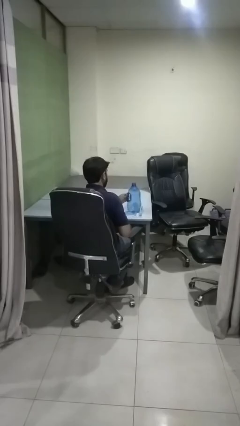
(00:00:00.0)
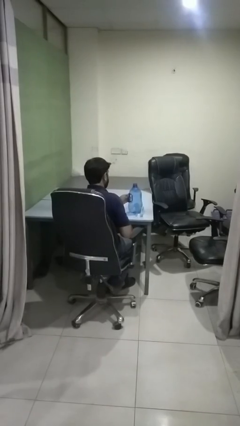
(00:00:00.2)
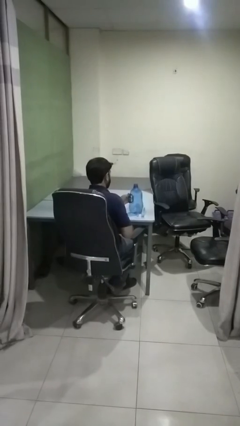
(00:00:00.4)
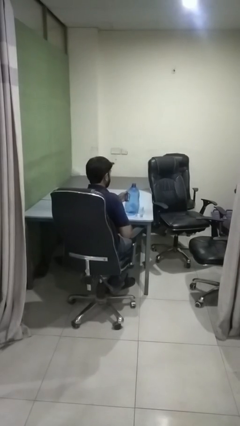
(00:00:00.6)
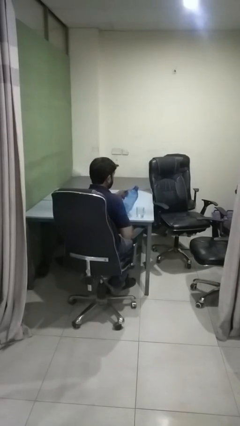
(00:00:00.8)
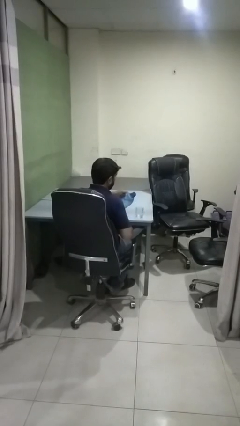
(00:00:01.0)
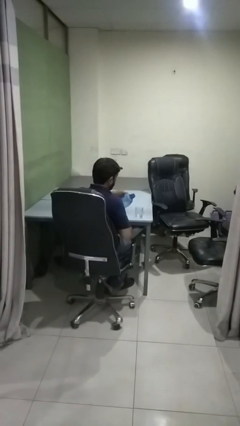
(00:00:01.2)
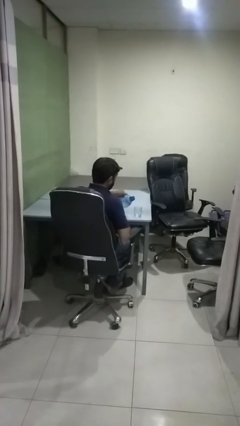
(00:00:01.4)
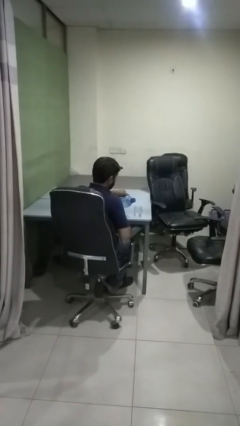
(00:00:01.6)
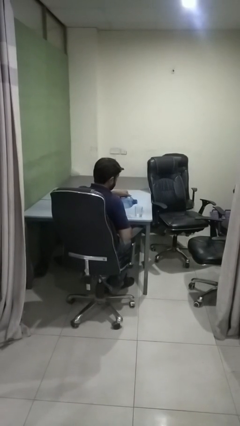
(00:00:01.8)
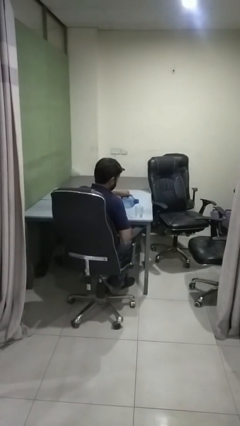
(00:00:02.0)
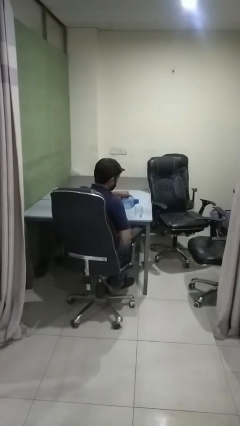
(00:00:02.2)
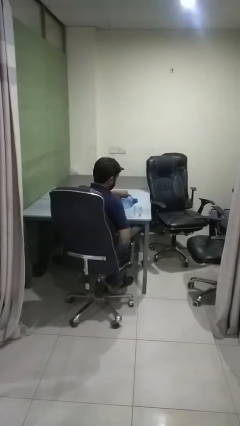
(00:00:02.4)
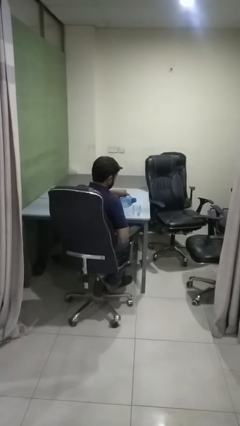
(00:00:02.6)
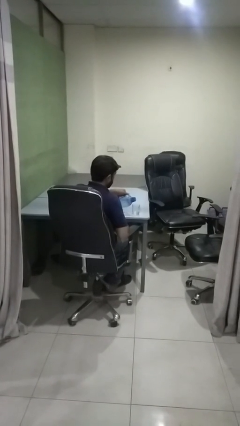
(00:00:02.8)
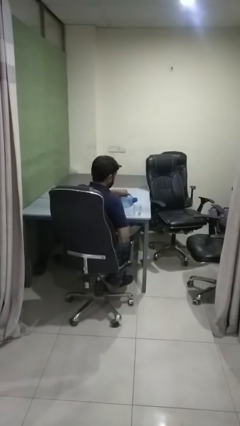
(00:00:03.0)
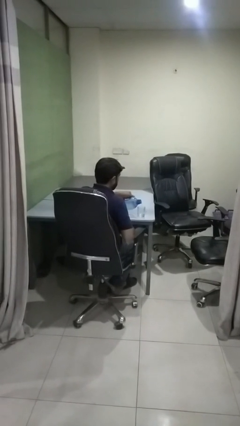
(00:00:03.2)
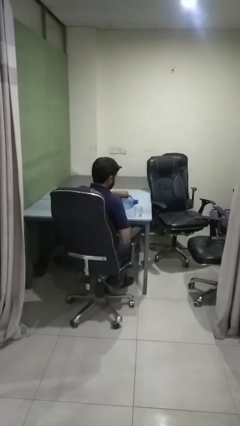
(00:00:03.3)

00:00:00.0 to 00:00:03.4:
person pours liquid into cup

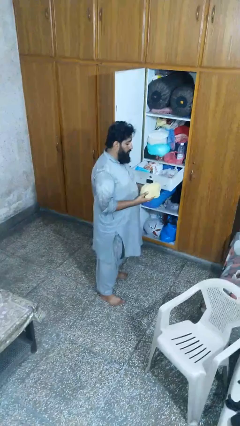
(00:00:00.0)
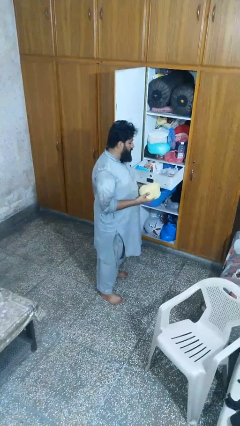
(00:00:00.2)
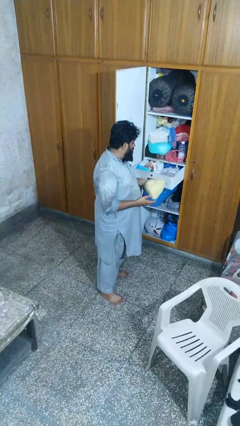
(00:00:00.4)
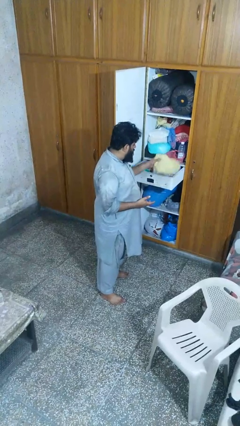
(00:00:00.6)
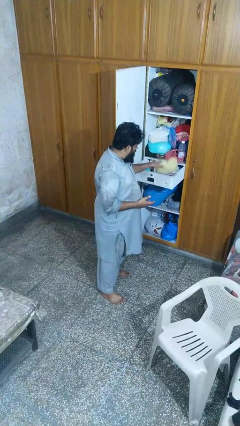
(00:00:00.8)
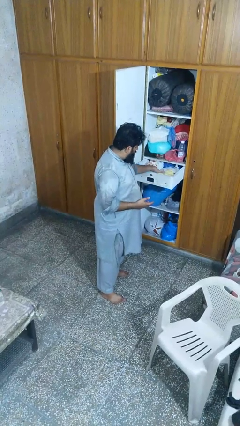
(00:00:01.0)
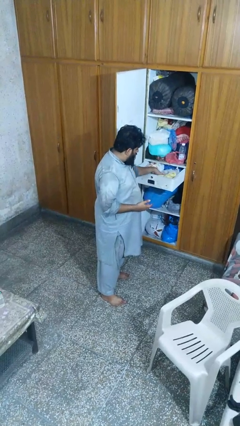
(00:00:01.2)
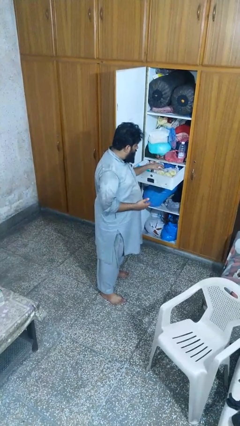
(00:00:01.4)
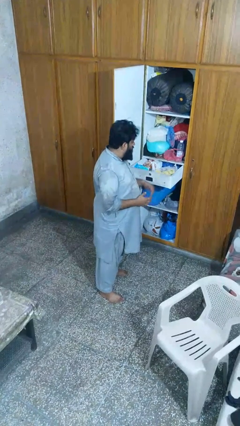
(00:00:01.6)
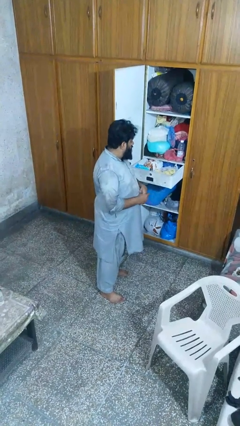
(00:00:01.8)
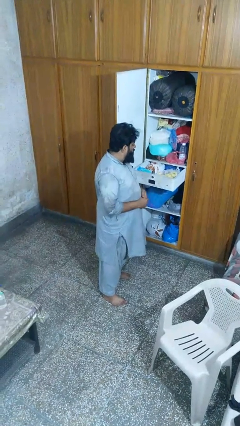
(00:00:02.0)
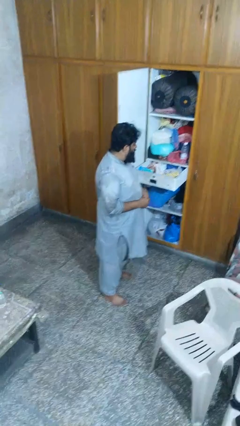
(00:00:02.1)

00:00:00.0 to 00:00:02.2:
person puts clothes into dresser

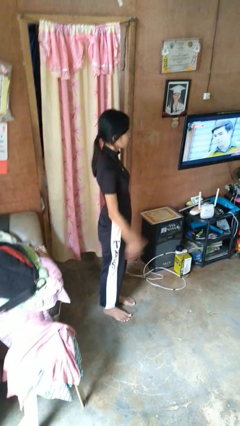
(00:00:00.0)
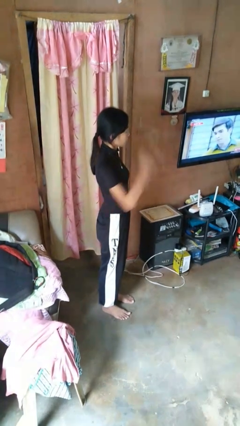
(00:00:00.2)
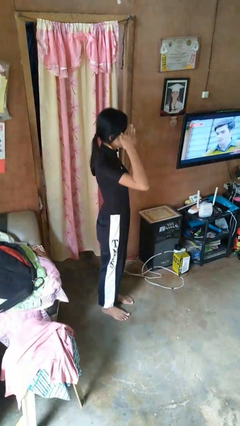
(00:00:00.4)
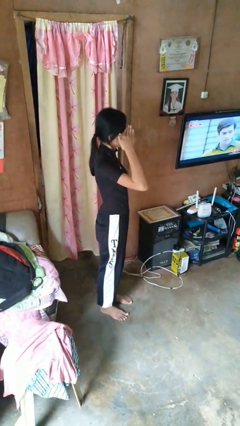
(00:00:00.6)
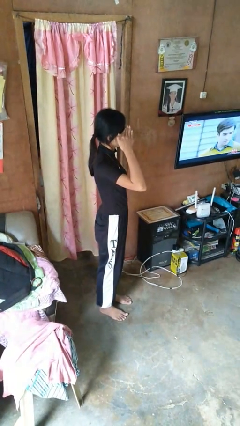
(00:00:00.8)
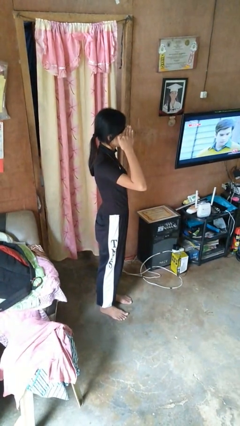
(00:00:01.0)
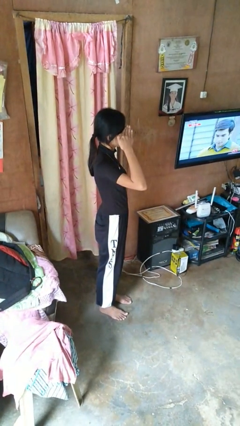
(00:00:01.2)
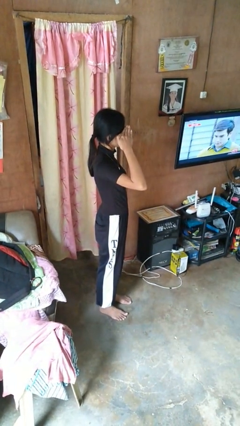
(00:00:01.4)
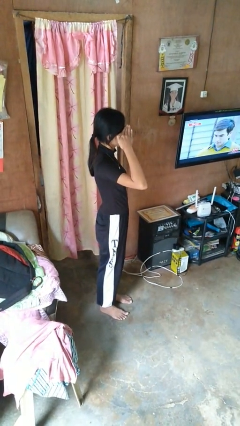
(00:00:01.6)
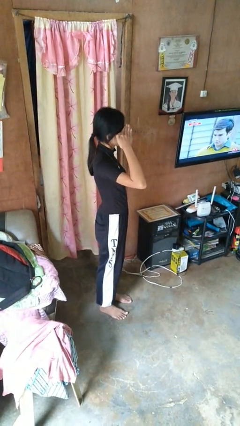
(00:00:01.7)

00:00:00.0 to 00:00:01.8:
person salutes

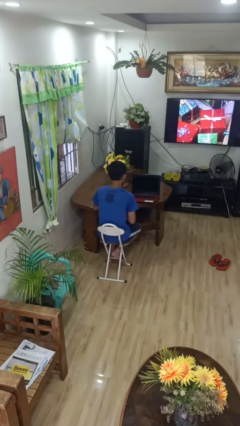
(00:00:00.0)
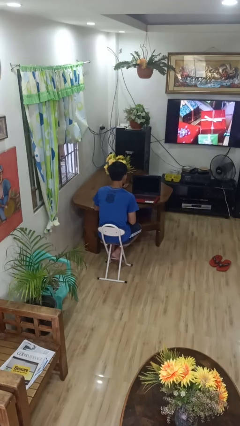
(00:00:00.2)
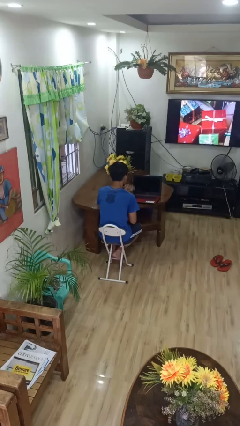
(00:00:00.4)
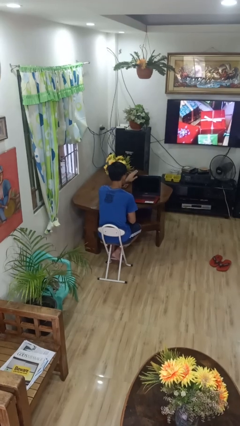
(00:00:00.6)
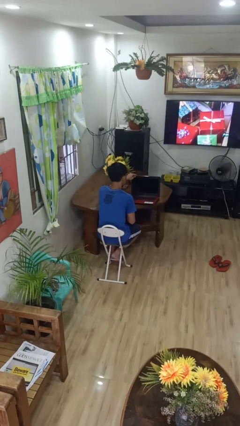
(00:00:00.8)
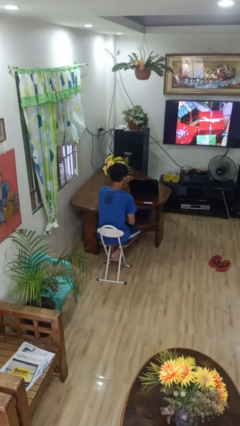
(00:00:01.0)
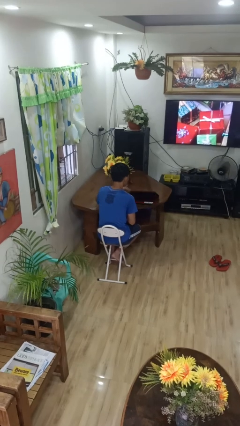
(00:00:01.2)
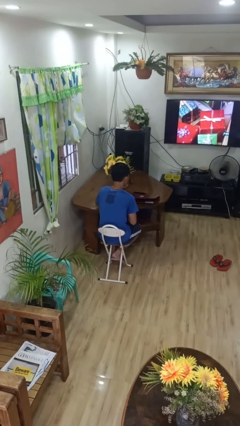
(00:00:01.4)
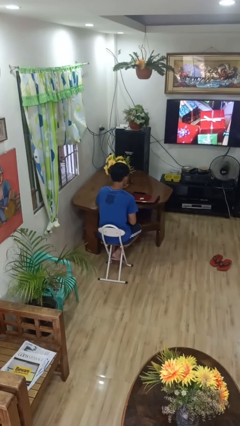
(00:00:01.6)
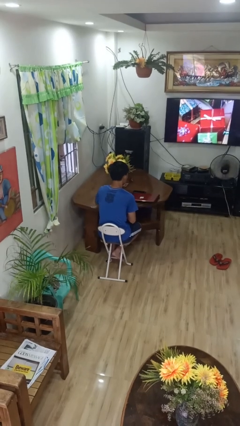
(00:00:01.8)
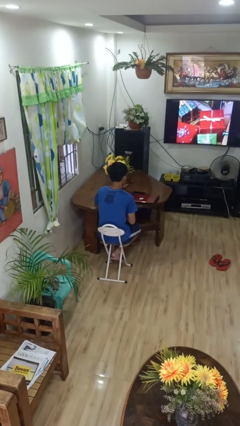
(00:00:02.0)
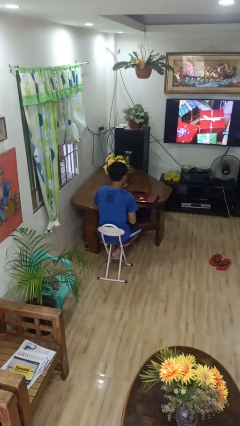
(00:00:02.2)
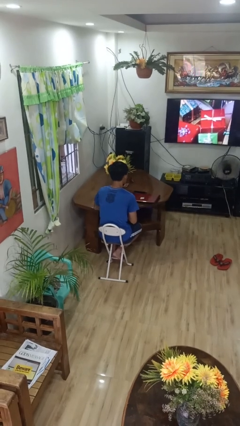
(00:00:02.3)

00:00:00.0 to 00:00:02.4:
person closes laptop

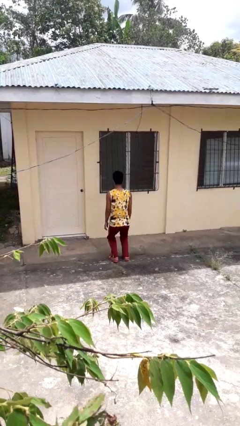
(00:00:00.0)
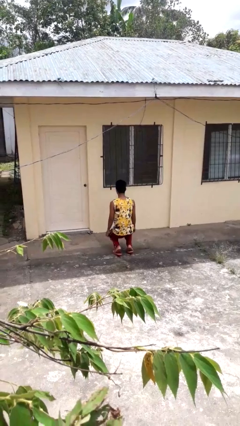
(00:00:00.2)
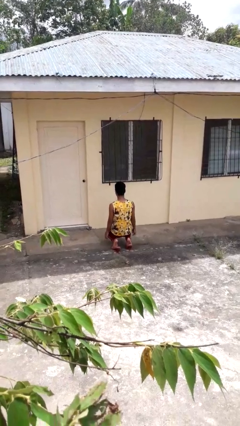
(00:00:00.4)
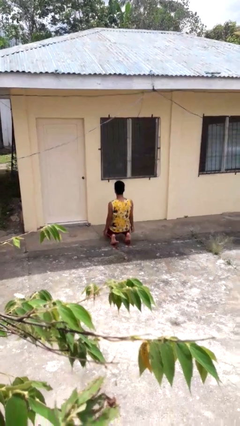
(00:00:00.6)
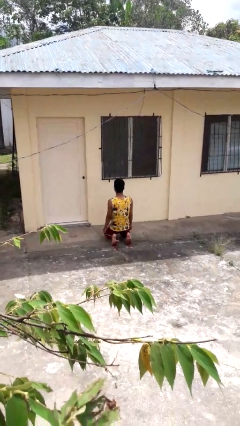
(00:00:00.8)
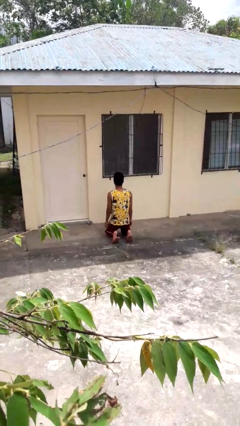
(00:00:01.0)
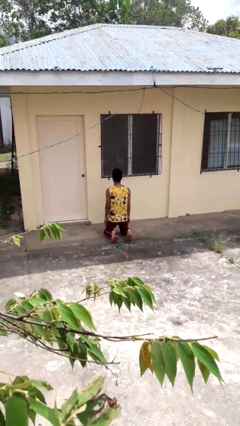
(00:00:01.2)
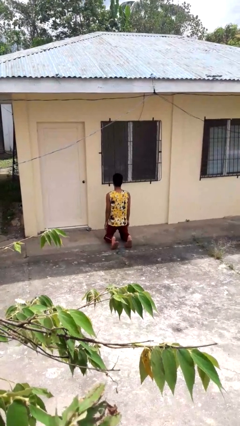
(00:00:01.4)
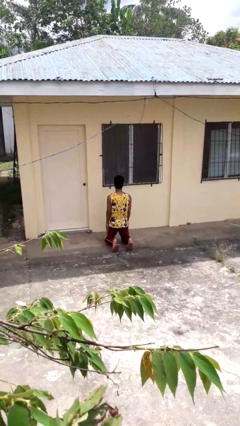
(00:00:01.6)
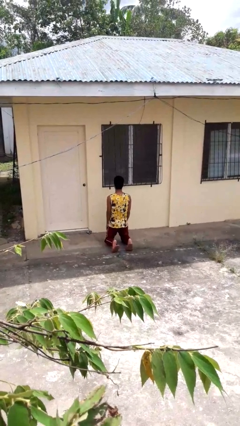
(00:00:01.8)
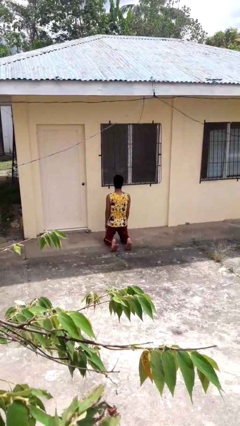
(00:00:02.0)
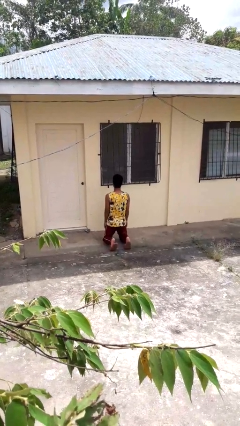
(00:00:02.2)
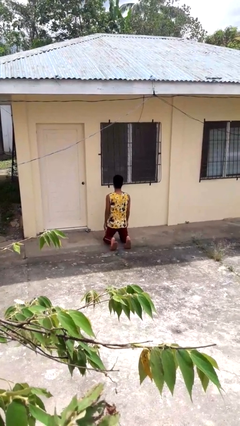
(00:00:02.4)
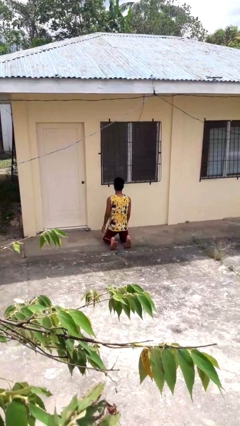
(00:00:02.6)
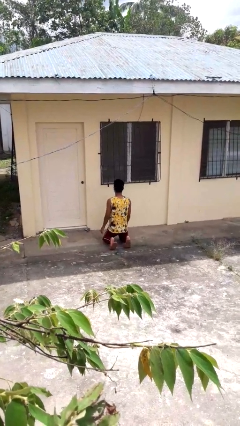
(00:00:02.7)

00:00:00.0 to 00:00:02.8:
person kneels

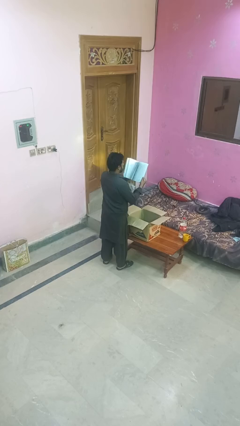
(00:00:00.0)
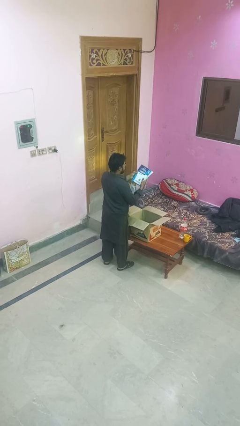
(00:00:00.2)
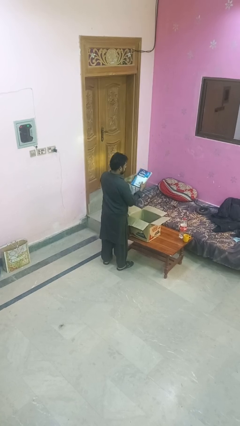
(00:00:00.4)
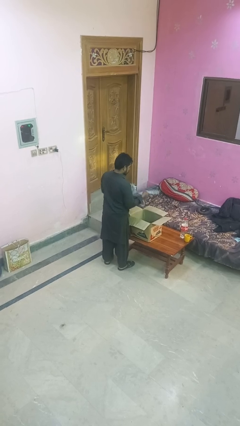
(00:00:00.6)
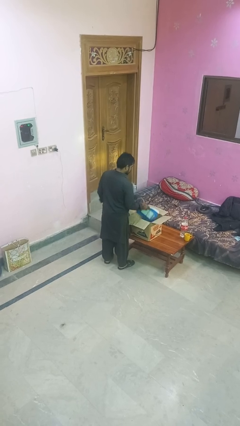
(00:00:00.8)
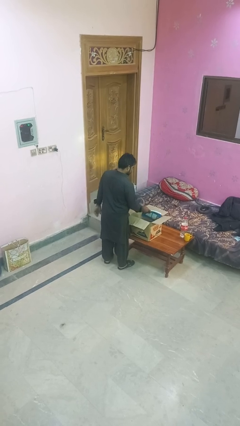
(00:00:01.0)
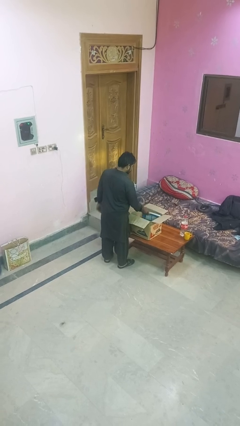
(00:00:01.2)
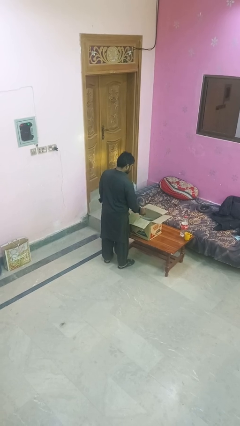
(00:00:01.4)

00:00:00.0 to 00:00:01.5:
person puts object into box

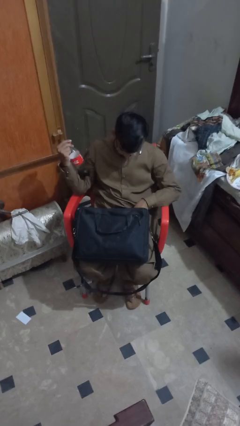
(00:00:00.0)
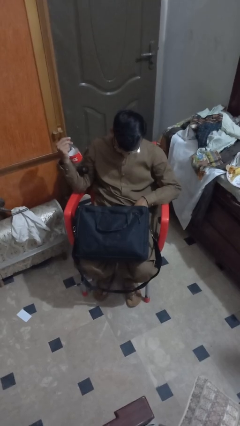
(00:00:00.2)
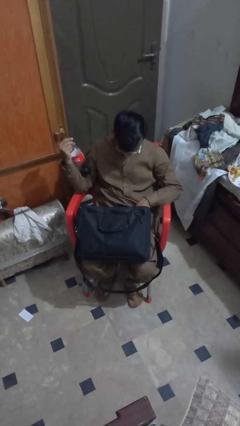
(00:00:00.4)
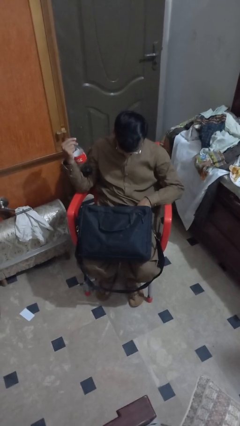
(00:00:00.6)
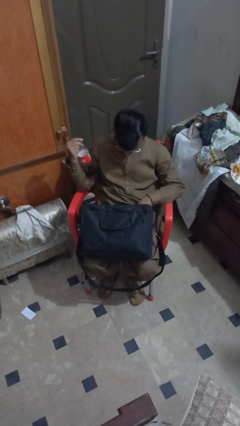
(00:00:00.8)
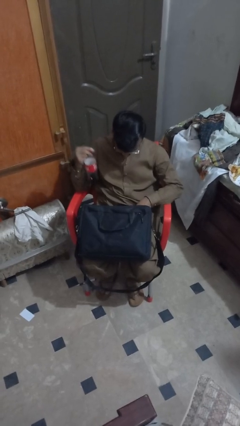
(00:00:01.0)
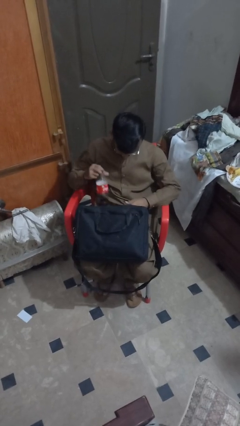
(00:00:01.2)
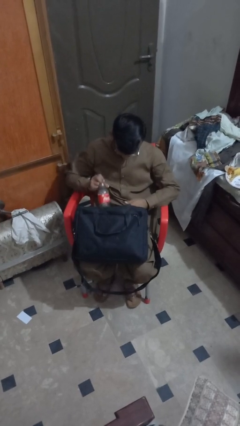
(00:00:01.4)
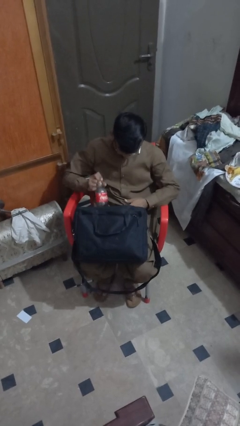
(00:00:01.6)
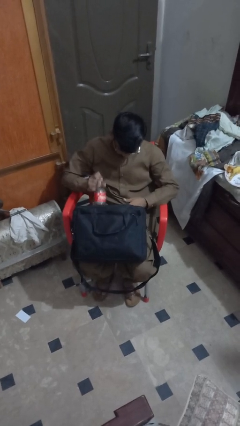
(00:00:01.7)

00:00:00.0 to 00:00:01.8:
person puts object into bag

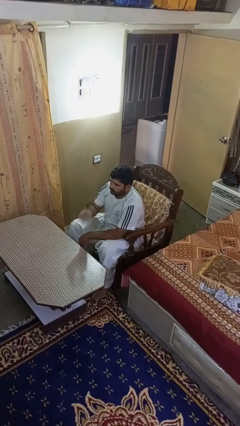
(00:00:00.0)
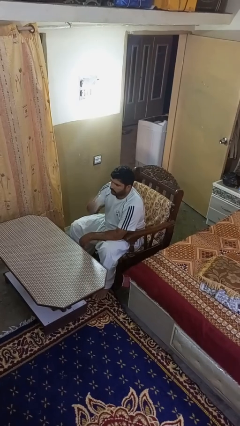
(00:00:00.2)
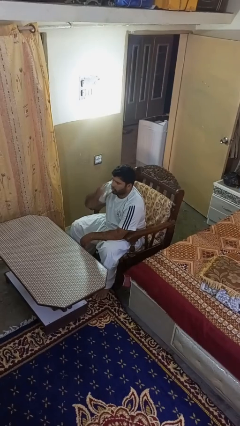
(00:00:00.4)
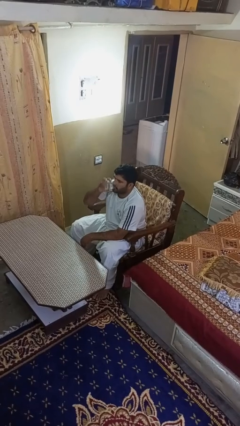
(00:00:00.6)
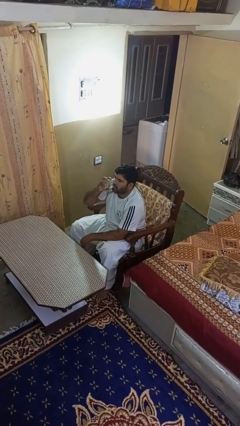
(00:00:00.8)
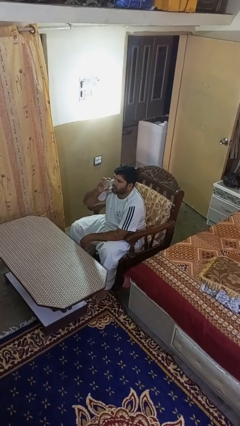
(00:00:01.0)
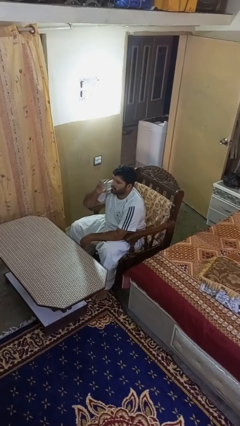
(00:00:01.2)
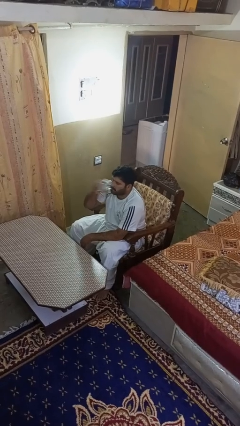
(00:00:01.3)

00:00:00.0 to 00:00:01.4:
person drinks from shotglass
